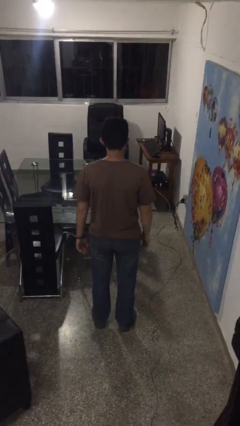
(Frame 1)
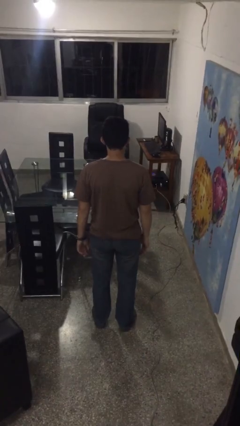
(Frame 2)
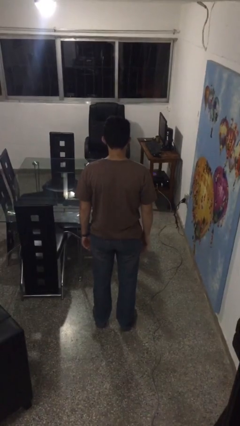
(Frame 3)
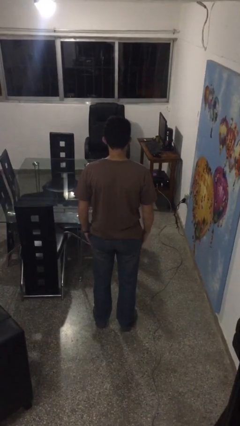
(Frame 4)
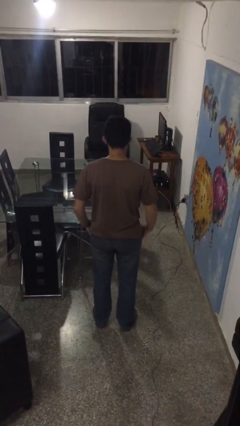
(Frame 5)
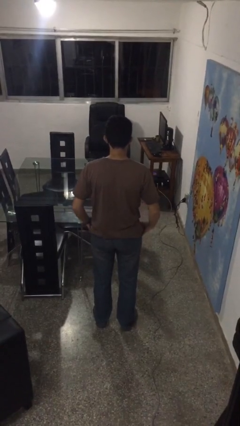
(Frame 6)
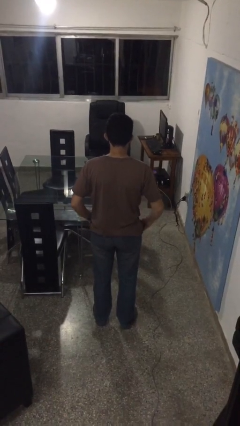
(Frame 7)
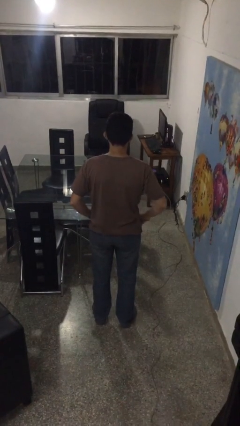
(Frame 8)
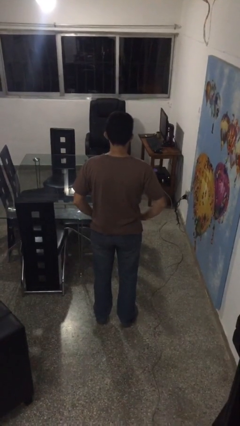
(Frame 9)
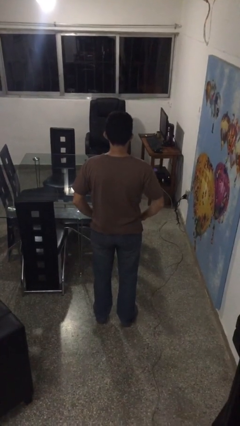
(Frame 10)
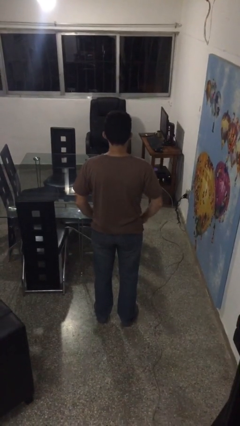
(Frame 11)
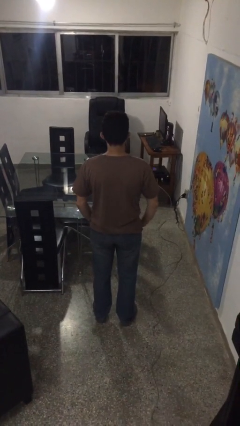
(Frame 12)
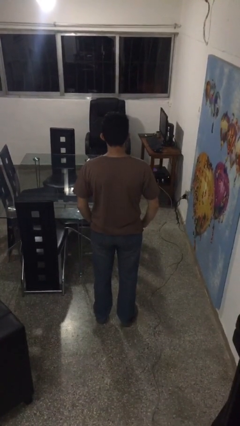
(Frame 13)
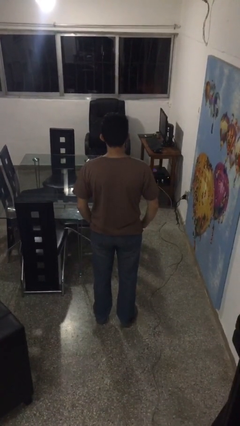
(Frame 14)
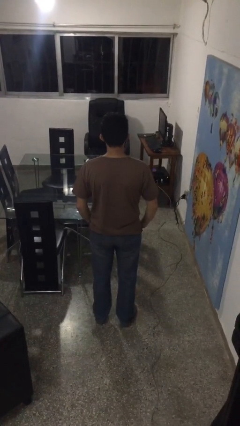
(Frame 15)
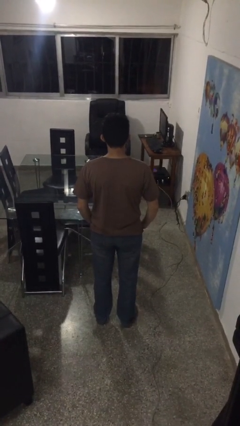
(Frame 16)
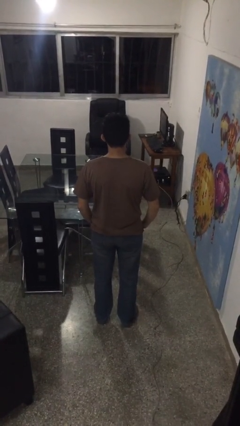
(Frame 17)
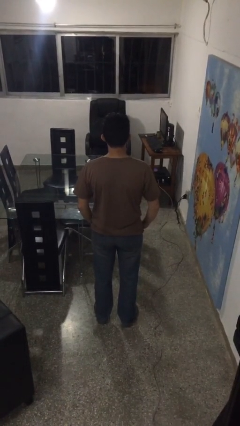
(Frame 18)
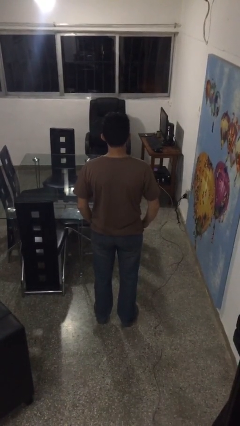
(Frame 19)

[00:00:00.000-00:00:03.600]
person puts hands in back pockets

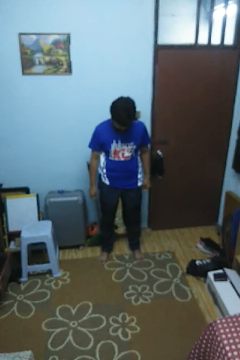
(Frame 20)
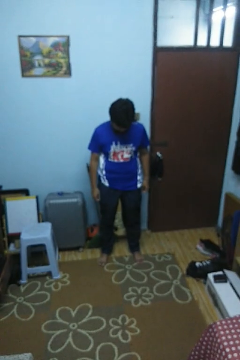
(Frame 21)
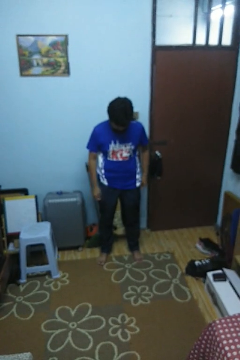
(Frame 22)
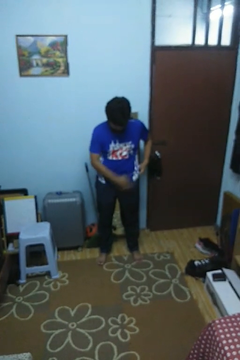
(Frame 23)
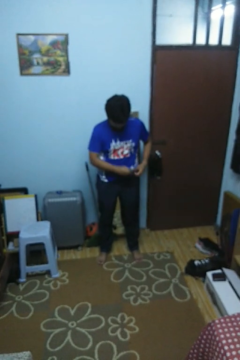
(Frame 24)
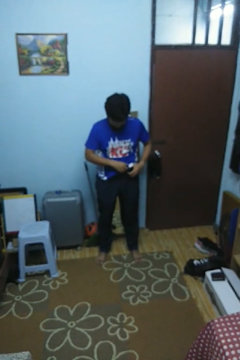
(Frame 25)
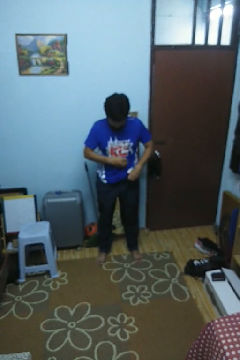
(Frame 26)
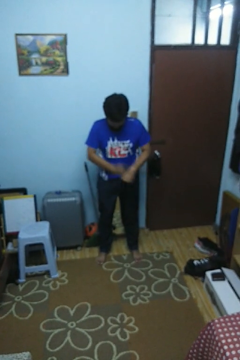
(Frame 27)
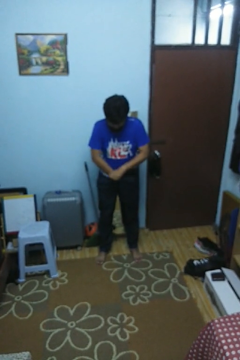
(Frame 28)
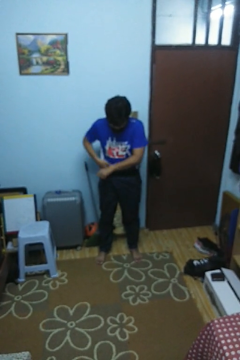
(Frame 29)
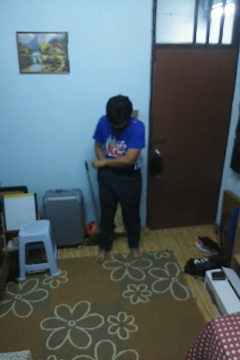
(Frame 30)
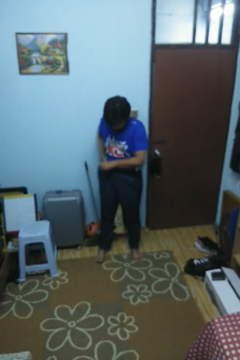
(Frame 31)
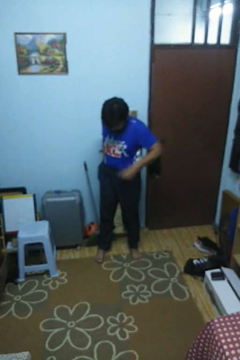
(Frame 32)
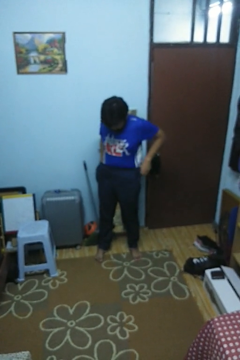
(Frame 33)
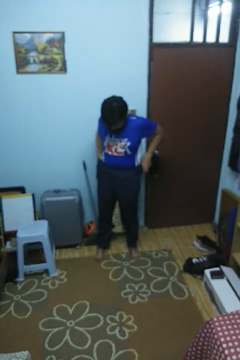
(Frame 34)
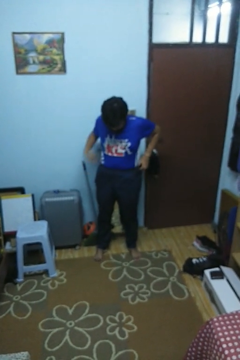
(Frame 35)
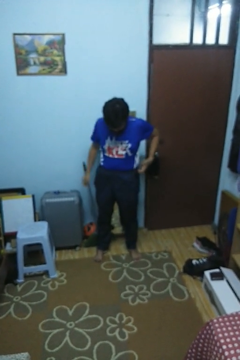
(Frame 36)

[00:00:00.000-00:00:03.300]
person tucks in shirt

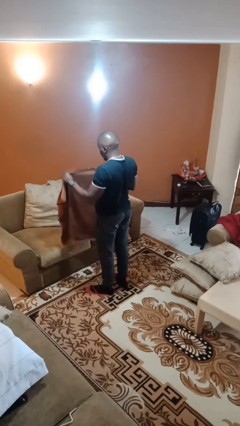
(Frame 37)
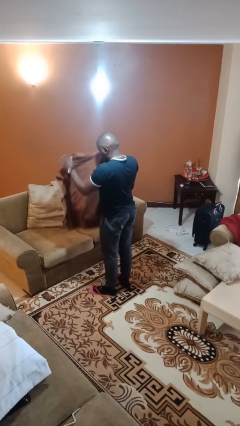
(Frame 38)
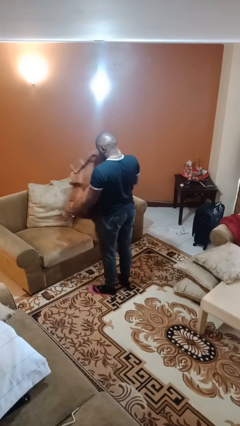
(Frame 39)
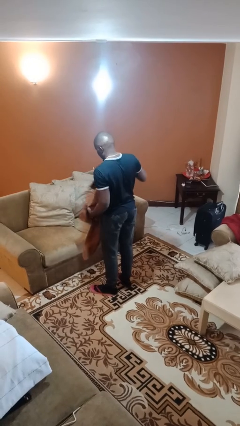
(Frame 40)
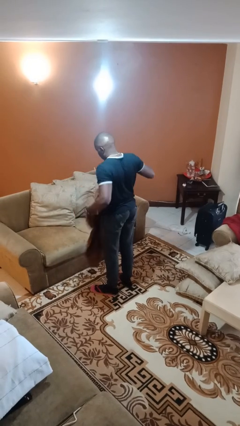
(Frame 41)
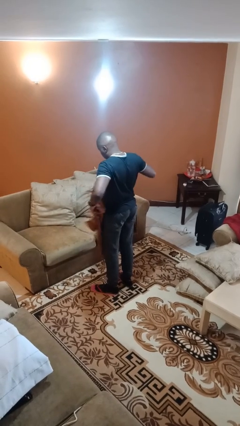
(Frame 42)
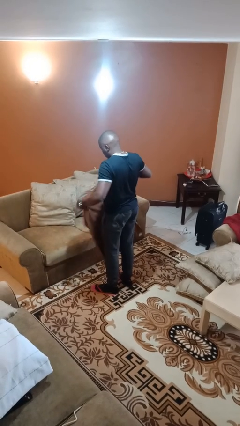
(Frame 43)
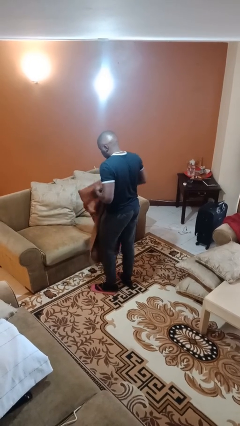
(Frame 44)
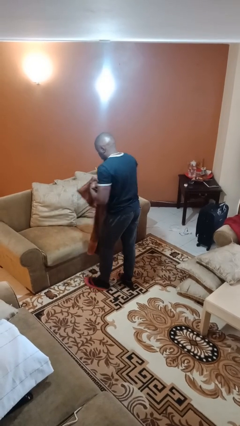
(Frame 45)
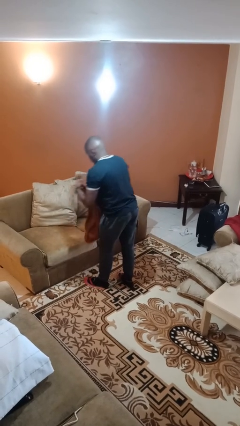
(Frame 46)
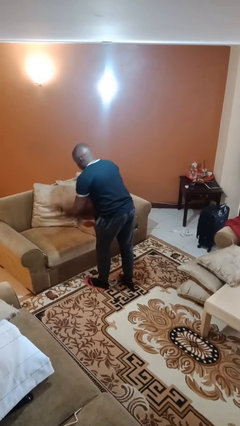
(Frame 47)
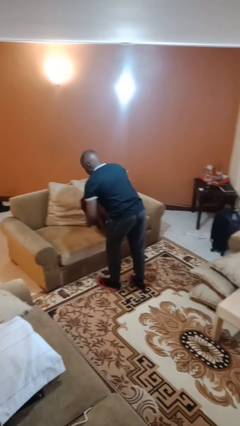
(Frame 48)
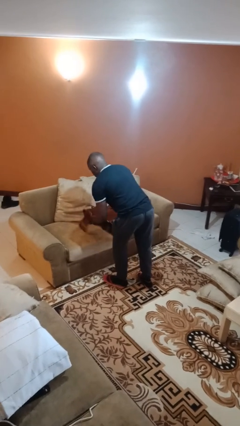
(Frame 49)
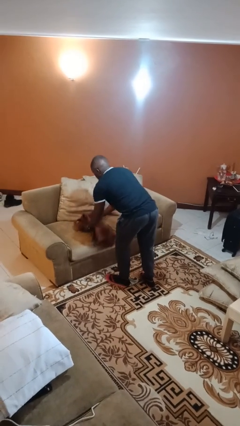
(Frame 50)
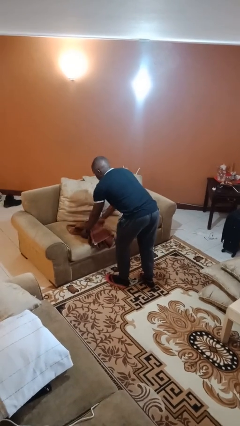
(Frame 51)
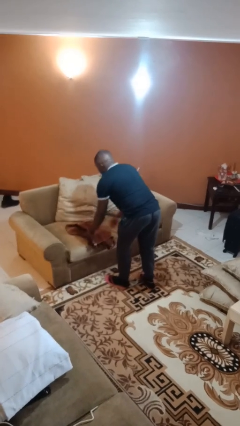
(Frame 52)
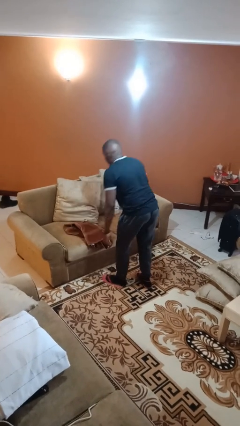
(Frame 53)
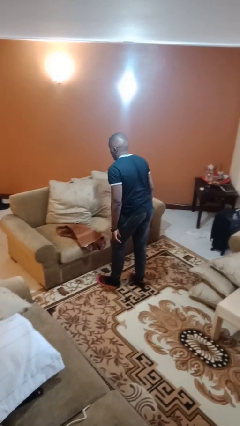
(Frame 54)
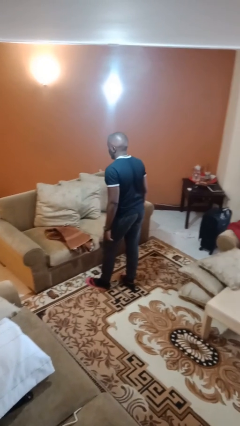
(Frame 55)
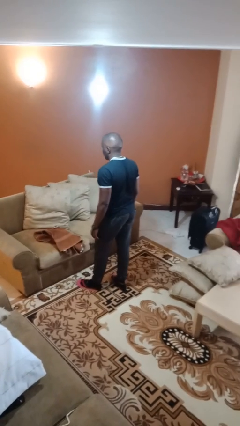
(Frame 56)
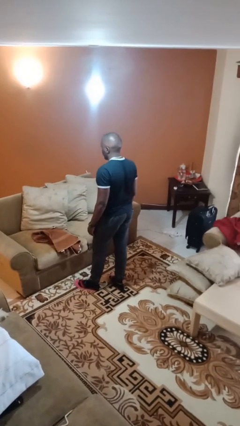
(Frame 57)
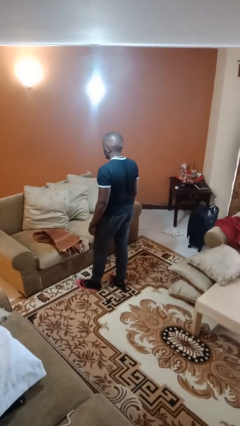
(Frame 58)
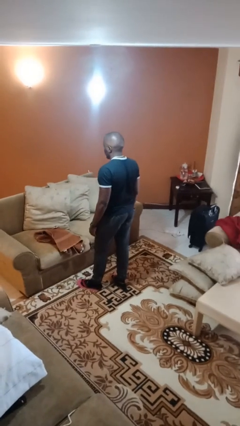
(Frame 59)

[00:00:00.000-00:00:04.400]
person folds towel

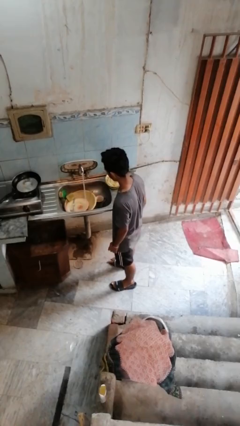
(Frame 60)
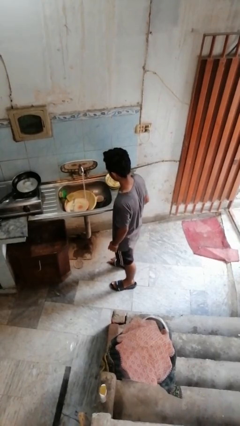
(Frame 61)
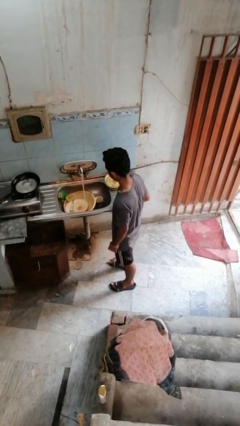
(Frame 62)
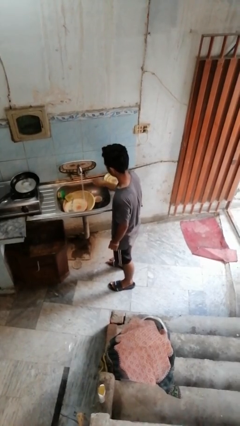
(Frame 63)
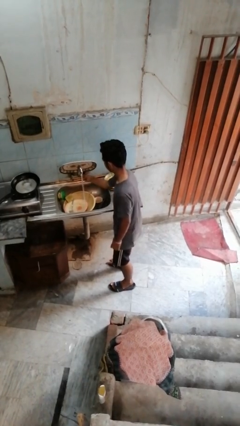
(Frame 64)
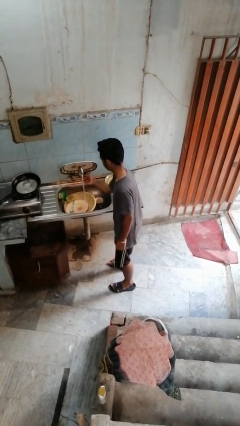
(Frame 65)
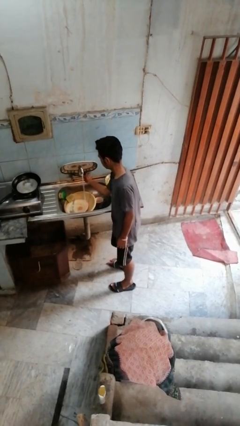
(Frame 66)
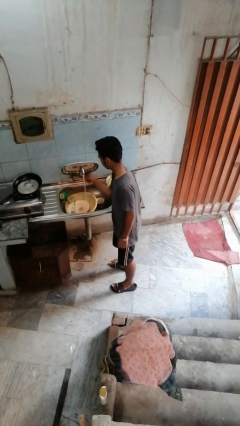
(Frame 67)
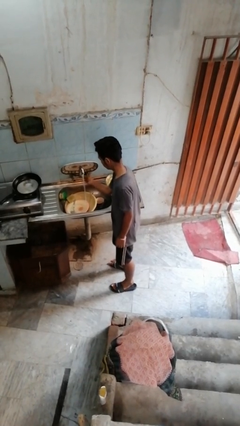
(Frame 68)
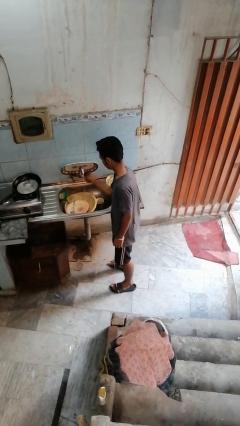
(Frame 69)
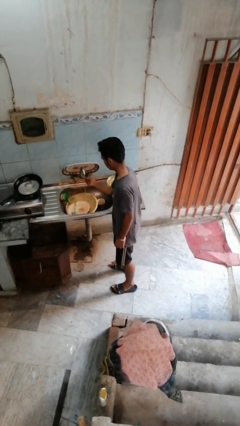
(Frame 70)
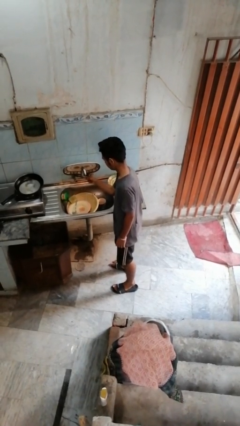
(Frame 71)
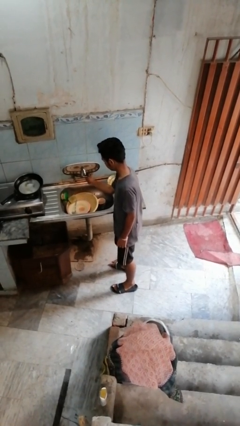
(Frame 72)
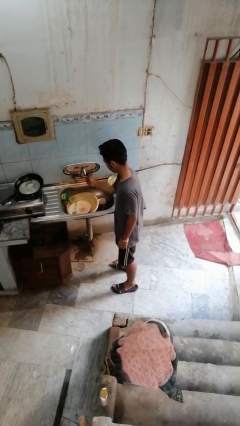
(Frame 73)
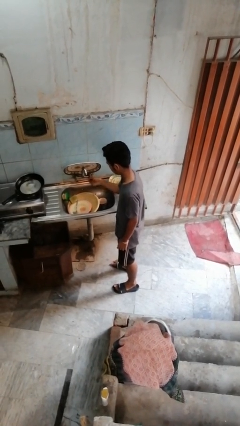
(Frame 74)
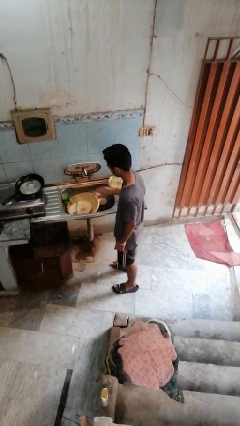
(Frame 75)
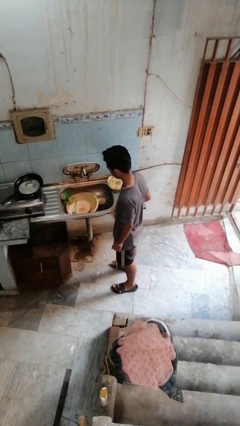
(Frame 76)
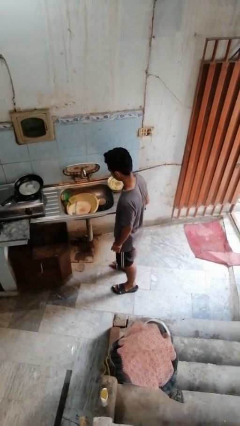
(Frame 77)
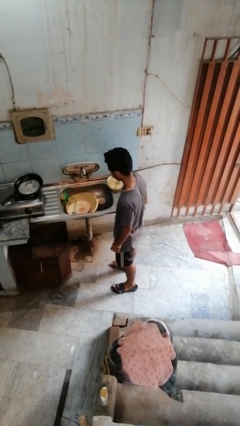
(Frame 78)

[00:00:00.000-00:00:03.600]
person turns off faucet

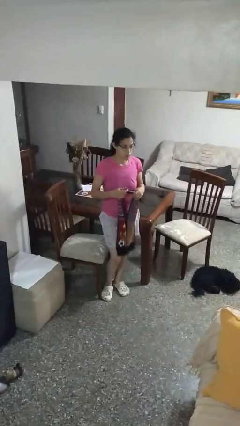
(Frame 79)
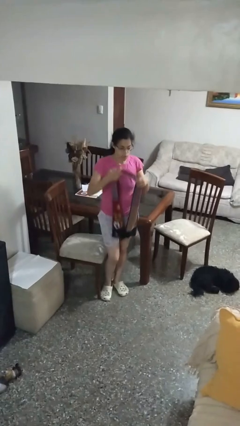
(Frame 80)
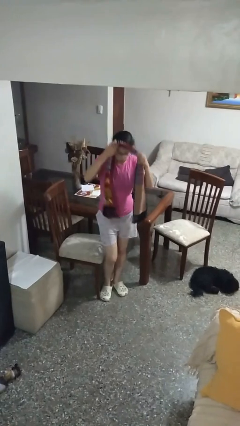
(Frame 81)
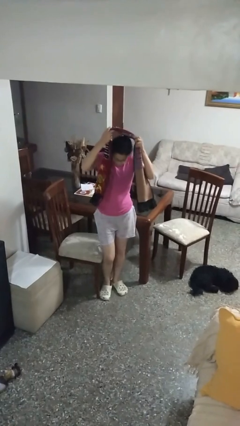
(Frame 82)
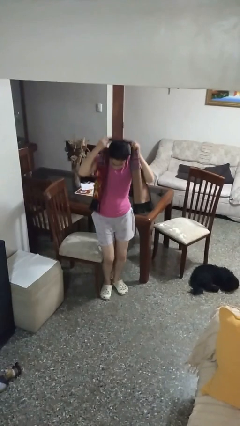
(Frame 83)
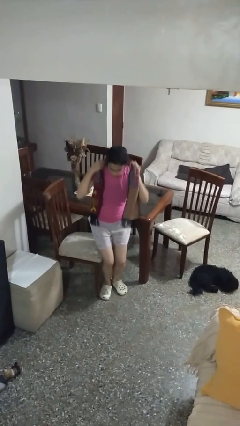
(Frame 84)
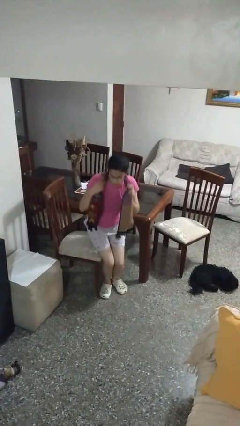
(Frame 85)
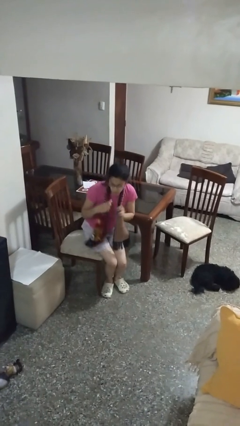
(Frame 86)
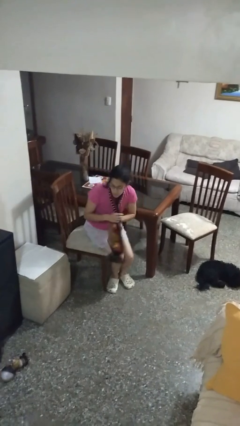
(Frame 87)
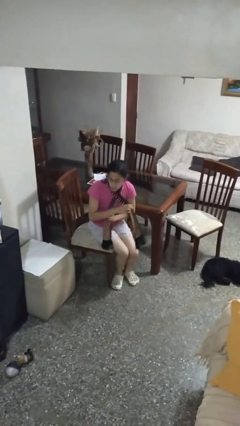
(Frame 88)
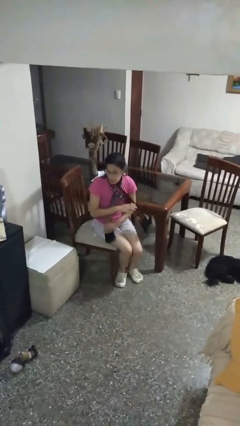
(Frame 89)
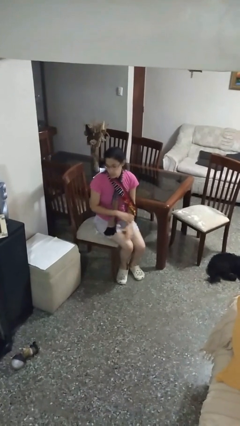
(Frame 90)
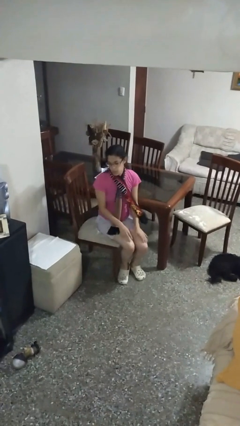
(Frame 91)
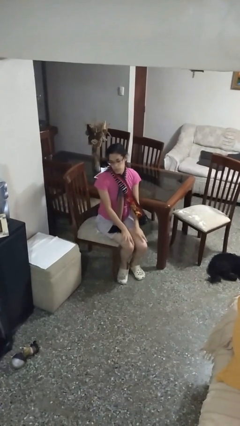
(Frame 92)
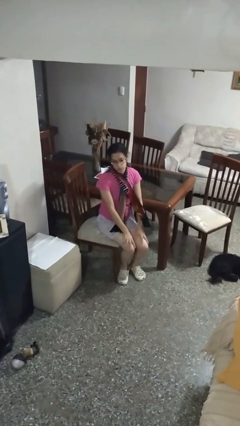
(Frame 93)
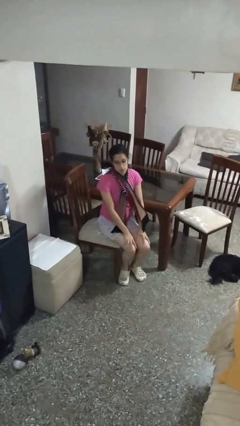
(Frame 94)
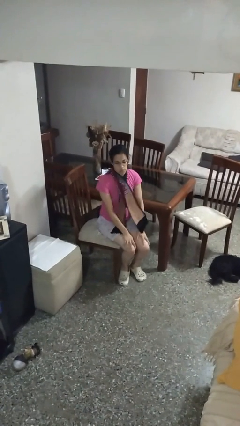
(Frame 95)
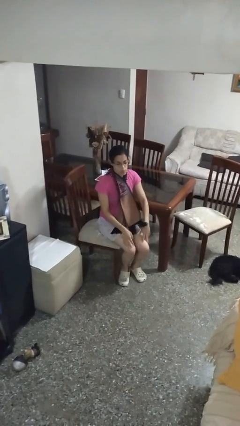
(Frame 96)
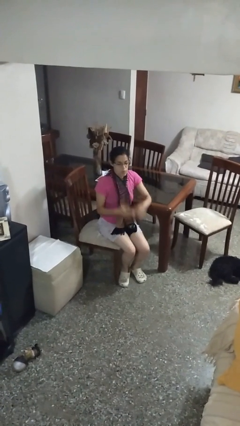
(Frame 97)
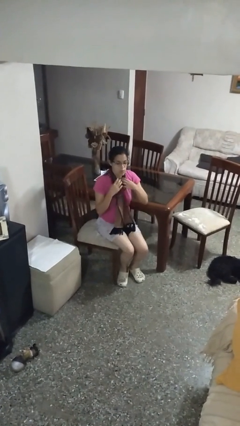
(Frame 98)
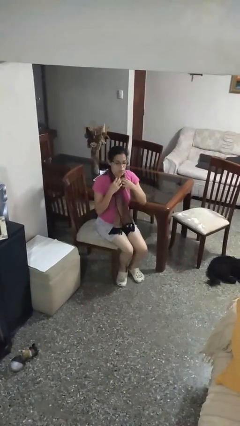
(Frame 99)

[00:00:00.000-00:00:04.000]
person puts on scarf
